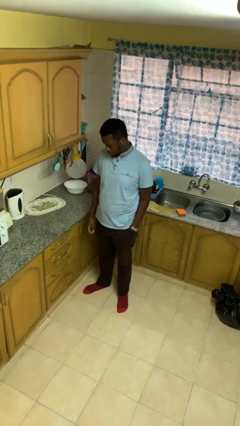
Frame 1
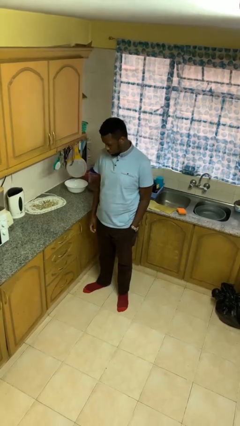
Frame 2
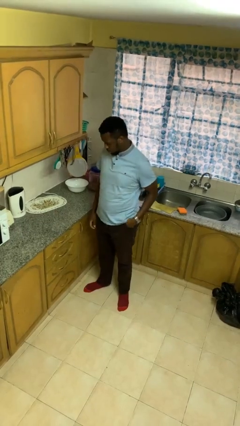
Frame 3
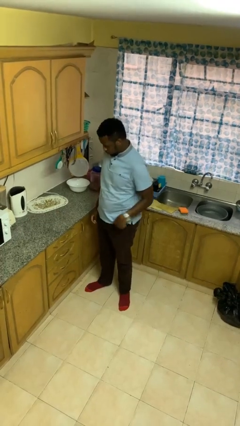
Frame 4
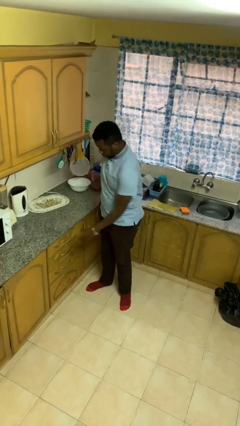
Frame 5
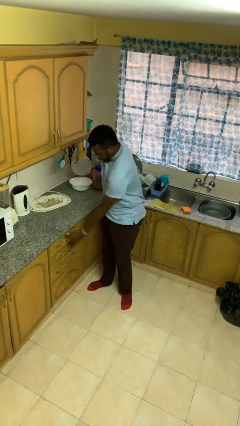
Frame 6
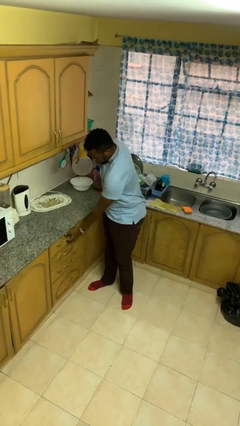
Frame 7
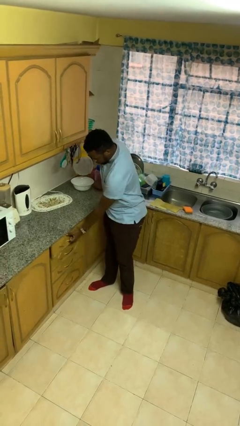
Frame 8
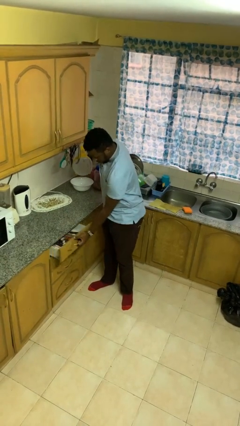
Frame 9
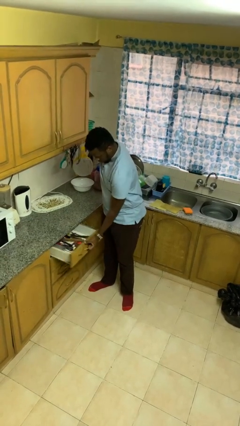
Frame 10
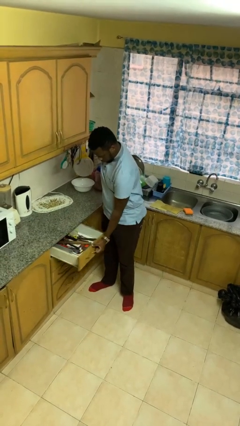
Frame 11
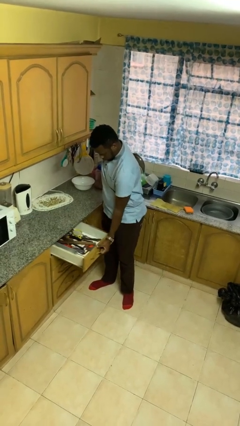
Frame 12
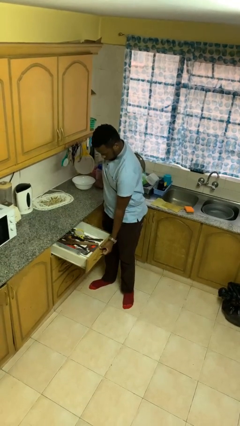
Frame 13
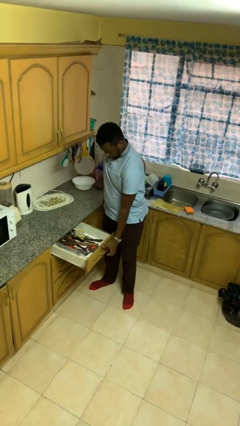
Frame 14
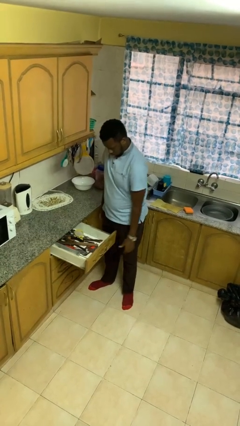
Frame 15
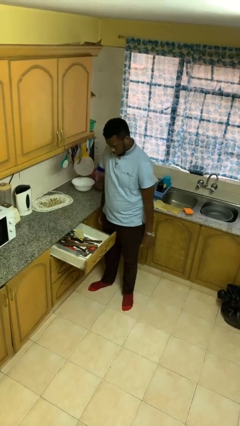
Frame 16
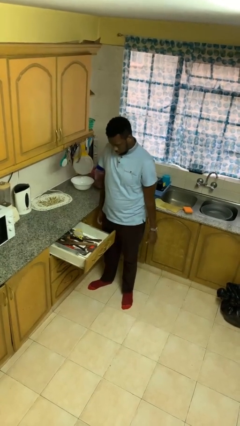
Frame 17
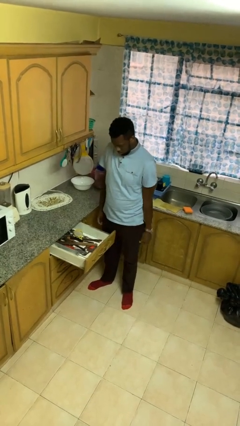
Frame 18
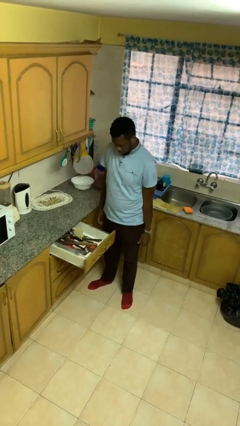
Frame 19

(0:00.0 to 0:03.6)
person opens kitchen drawer

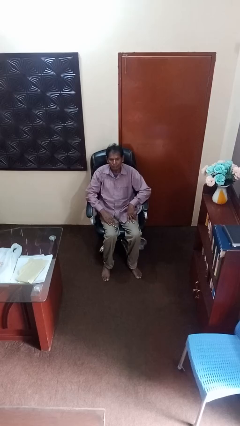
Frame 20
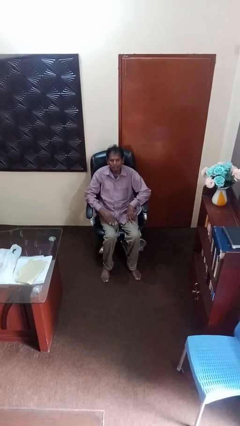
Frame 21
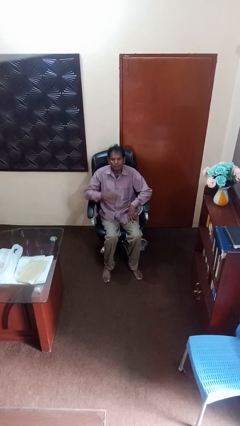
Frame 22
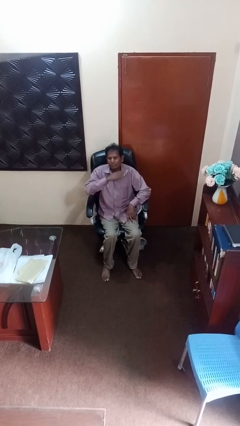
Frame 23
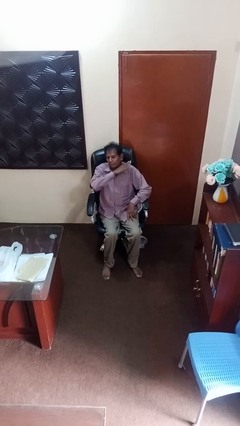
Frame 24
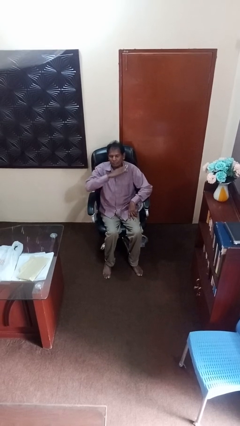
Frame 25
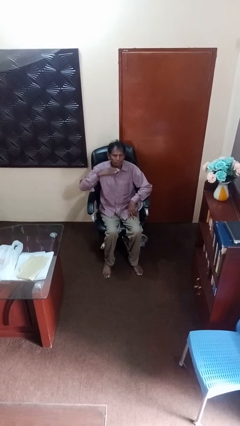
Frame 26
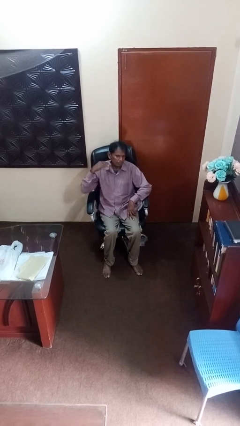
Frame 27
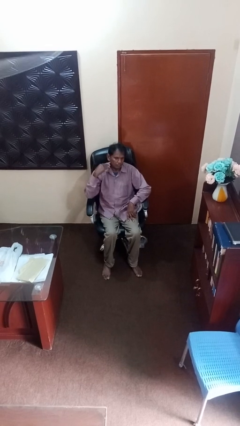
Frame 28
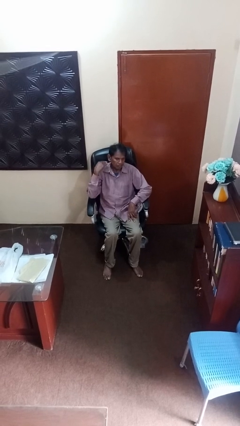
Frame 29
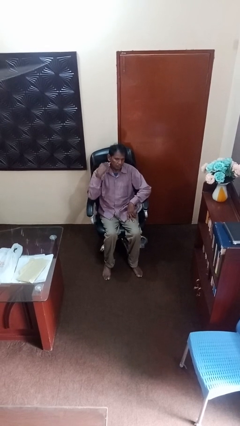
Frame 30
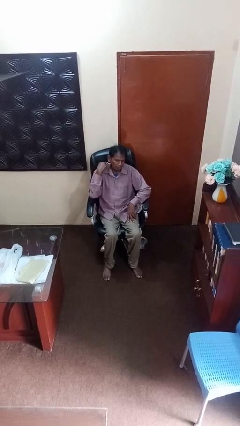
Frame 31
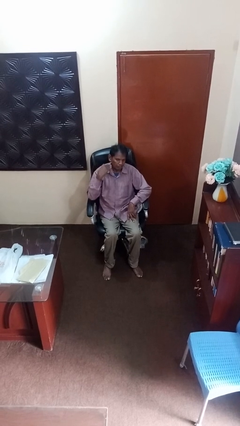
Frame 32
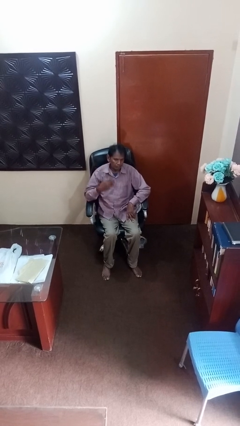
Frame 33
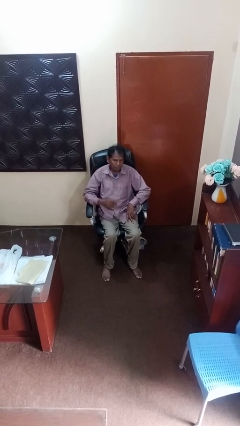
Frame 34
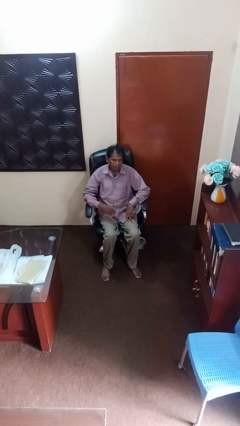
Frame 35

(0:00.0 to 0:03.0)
person gestures cut

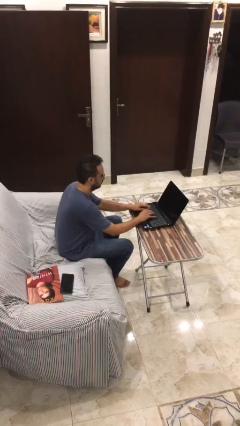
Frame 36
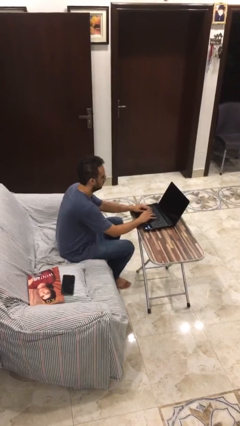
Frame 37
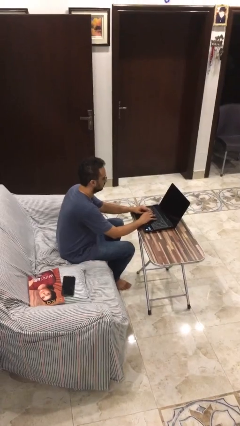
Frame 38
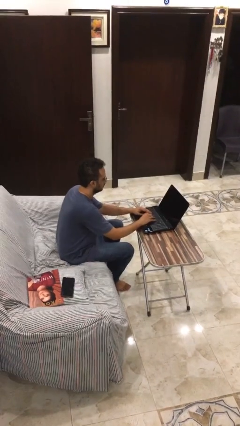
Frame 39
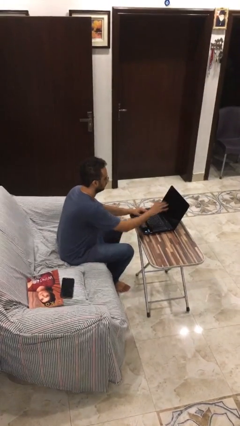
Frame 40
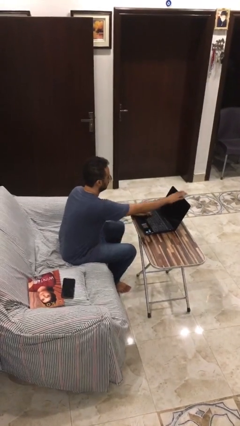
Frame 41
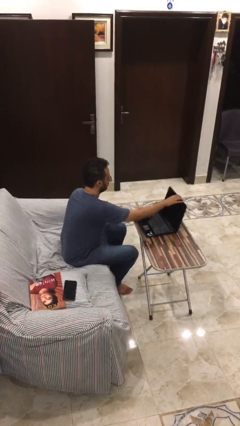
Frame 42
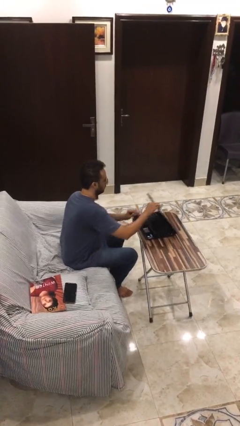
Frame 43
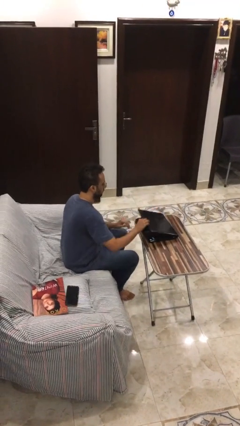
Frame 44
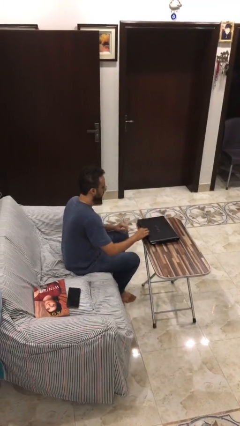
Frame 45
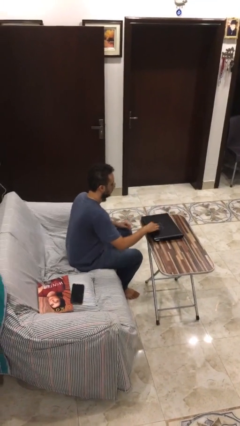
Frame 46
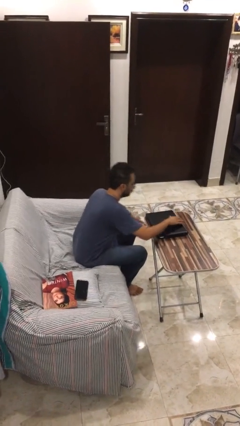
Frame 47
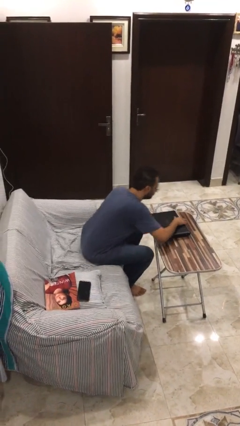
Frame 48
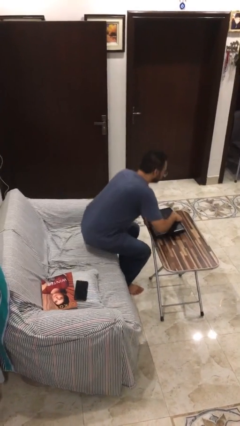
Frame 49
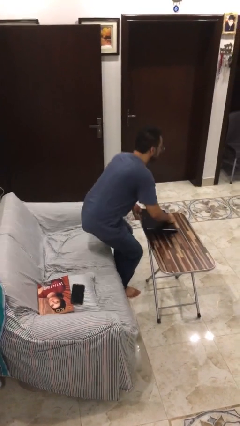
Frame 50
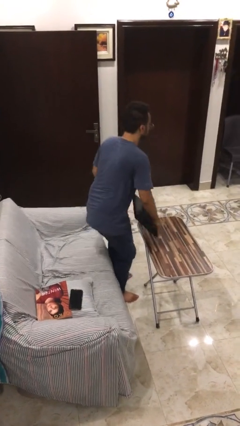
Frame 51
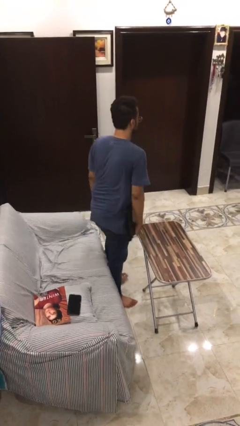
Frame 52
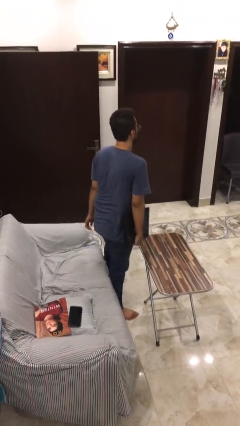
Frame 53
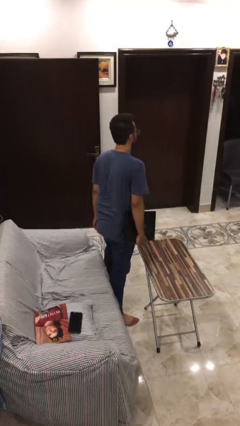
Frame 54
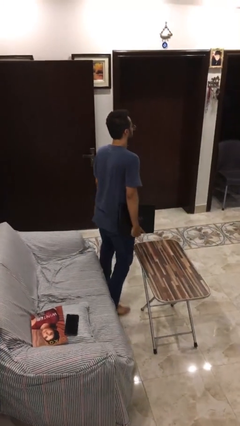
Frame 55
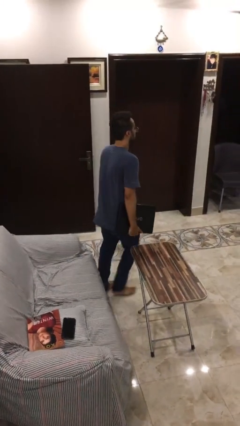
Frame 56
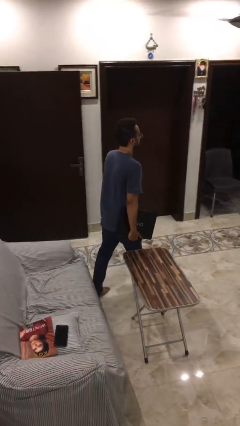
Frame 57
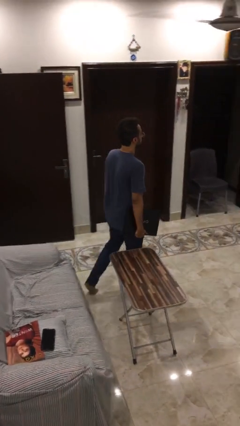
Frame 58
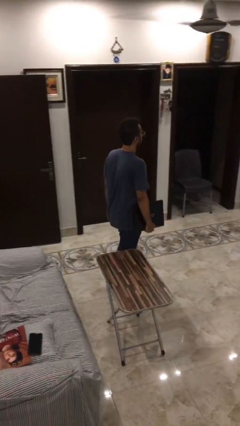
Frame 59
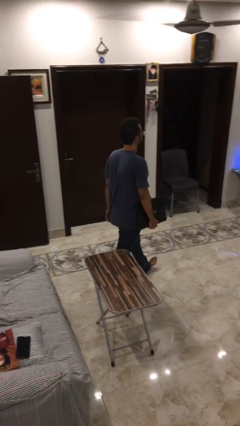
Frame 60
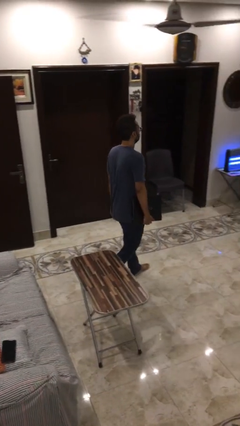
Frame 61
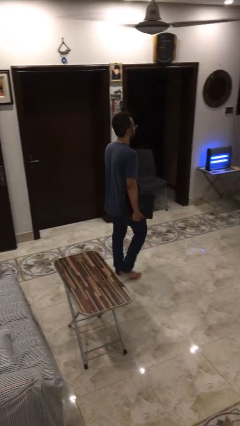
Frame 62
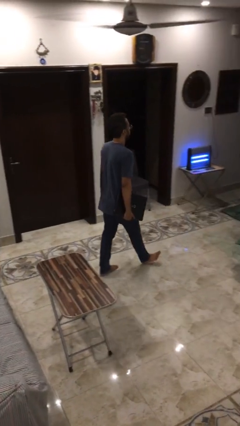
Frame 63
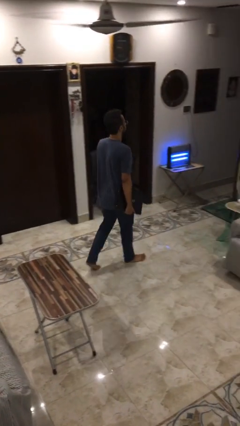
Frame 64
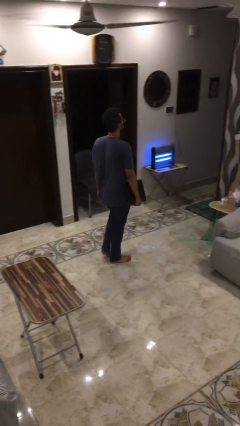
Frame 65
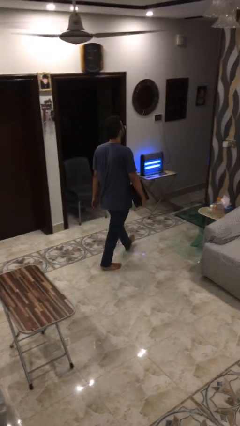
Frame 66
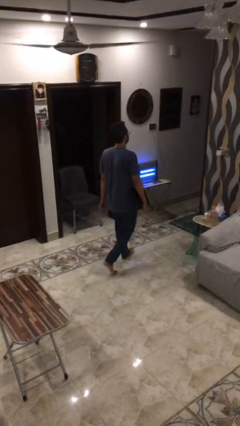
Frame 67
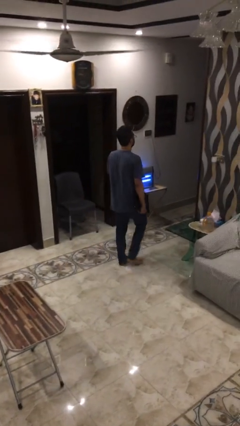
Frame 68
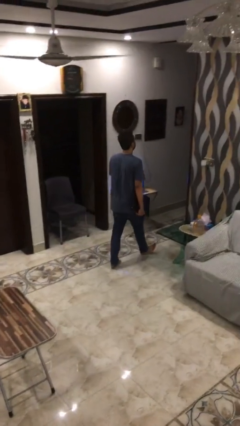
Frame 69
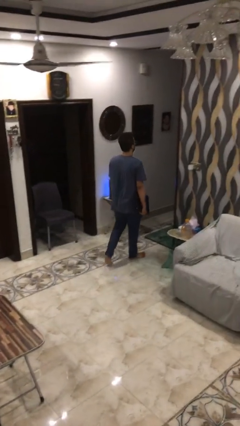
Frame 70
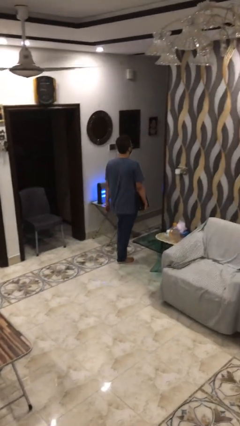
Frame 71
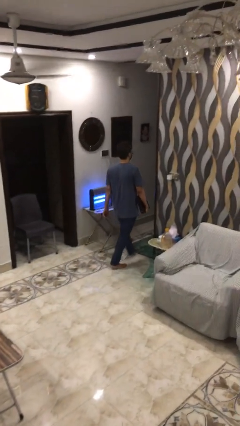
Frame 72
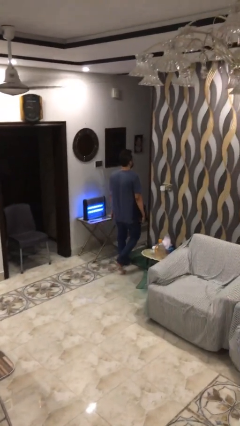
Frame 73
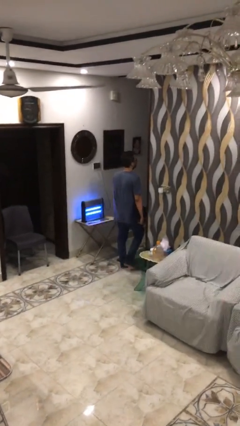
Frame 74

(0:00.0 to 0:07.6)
person stands up

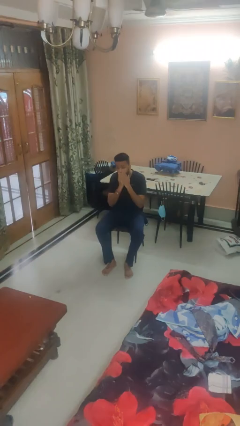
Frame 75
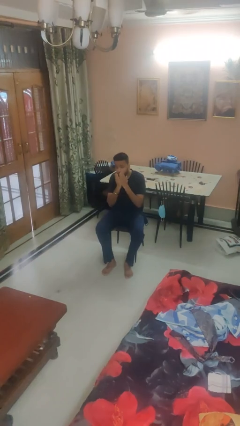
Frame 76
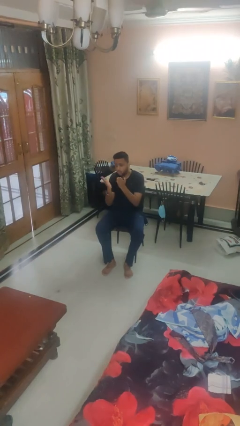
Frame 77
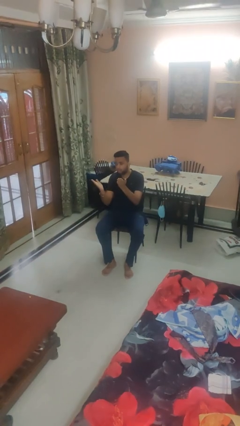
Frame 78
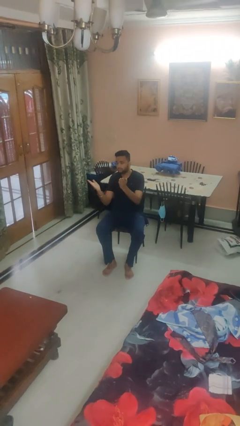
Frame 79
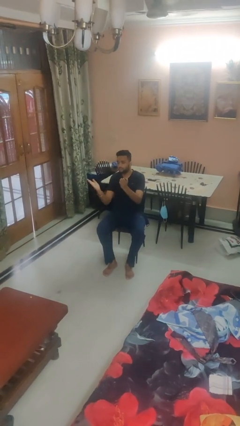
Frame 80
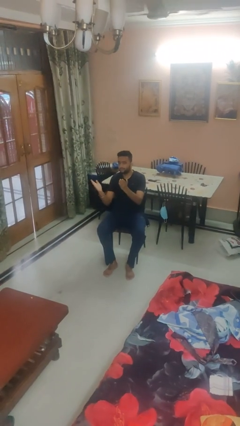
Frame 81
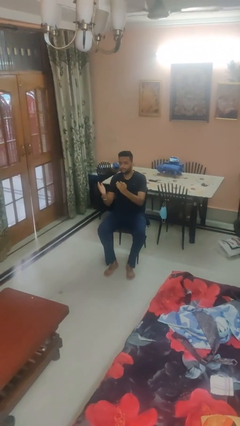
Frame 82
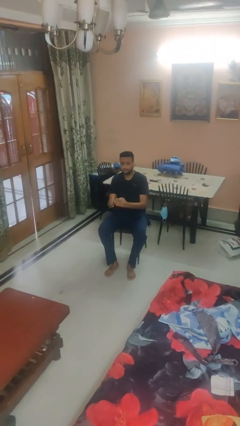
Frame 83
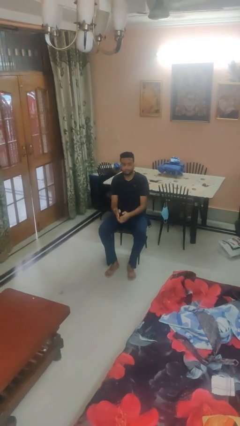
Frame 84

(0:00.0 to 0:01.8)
person gestures blow kiss

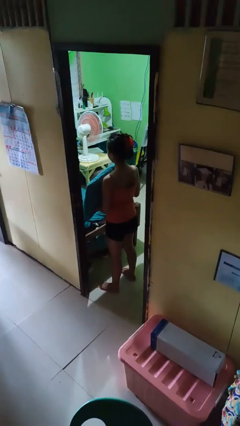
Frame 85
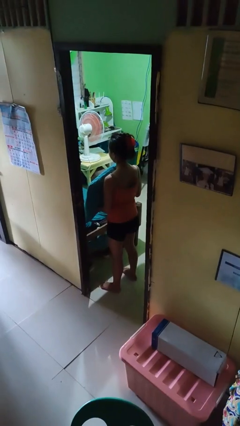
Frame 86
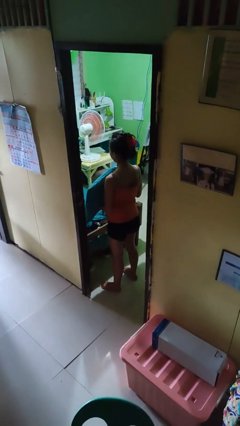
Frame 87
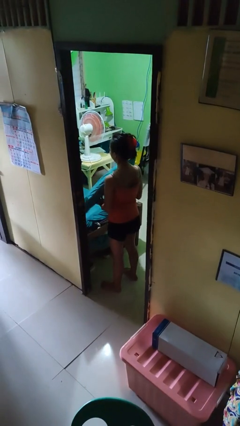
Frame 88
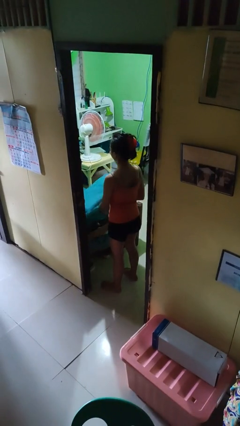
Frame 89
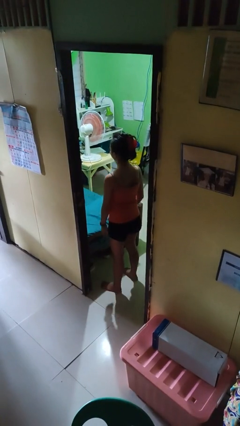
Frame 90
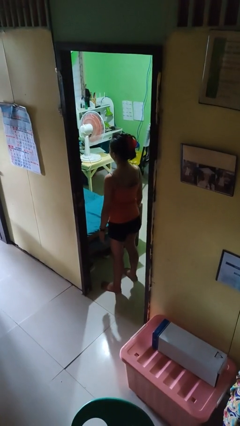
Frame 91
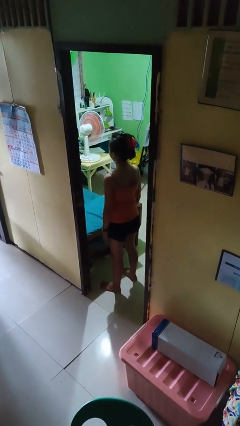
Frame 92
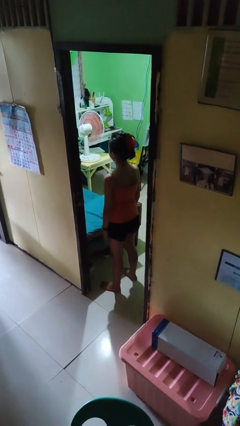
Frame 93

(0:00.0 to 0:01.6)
person puts down object on bed

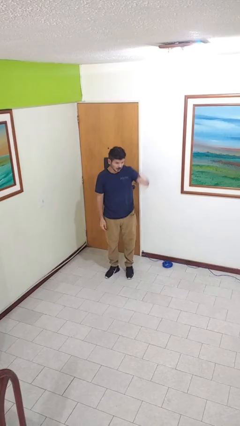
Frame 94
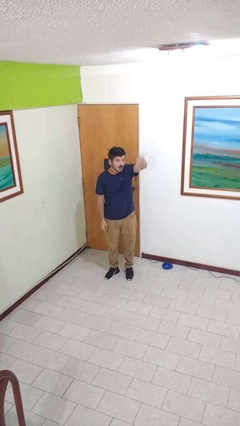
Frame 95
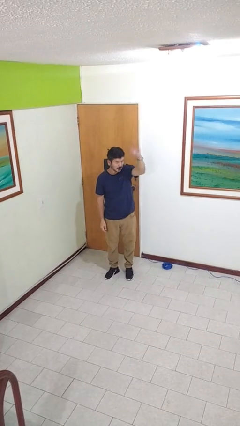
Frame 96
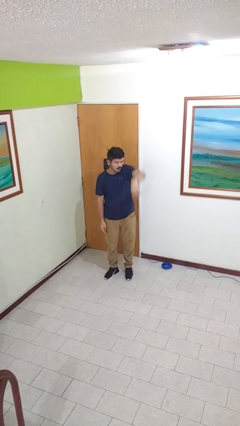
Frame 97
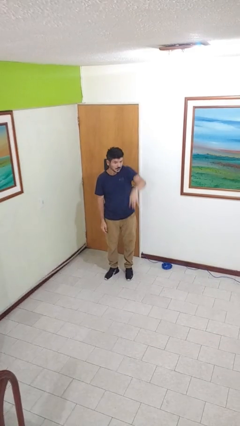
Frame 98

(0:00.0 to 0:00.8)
person gestures come here
